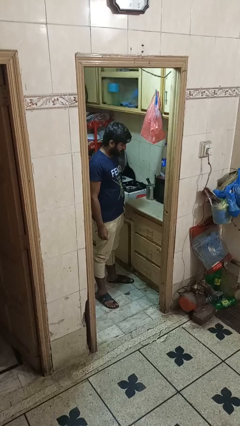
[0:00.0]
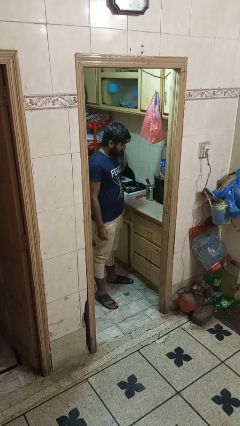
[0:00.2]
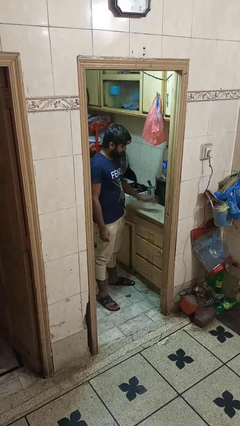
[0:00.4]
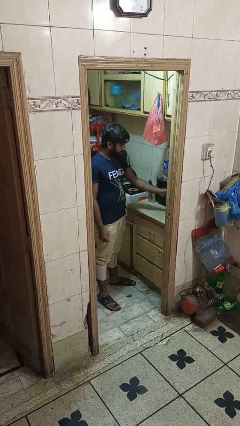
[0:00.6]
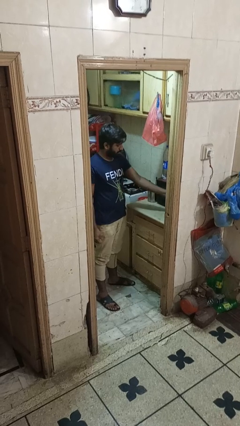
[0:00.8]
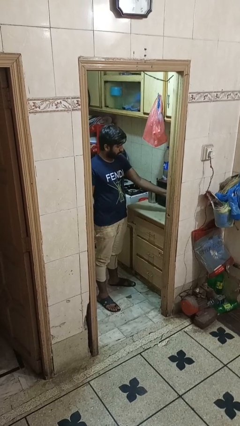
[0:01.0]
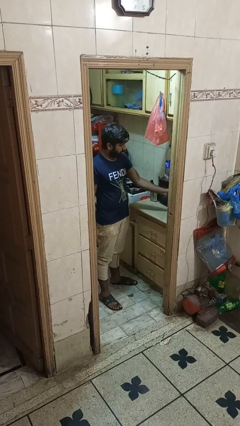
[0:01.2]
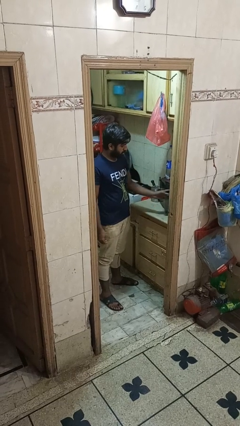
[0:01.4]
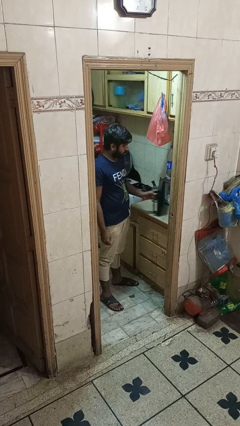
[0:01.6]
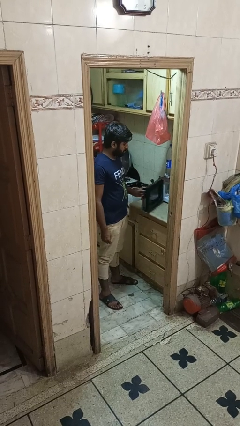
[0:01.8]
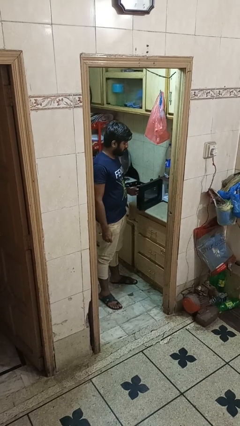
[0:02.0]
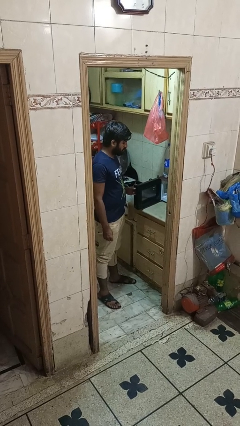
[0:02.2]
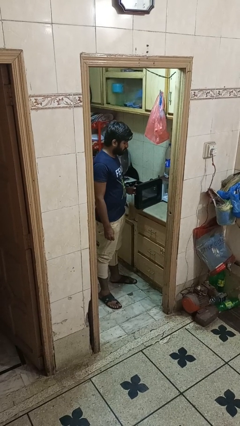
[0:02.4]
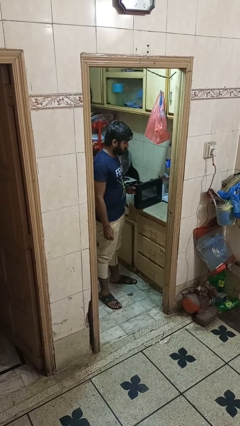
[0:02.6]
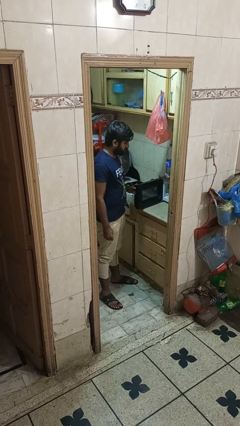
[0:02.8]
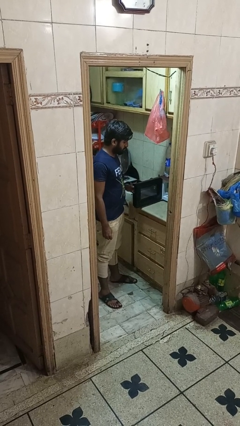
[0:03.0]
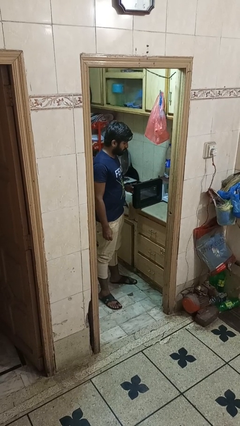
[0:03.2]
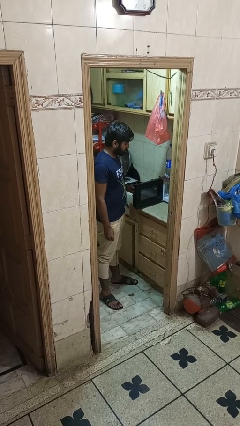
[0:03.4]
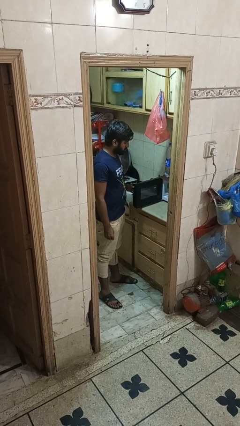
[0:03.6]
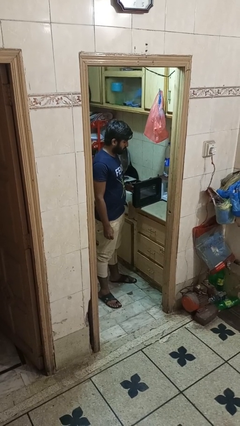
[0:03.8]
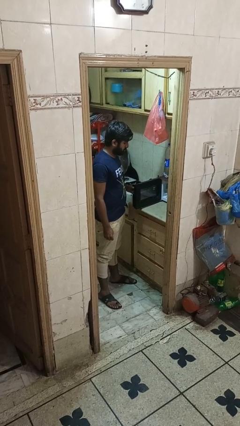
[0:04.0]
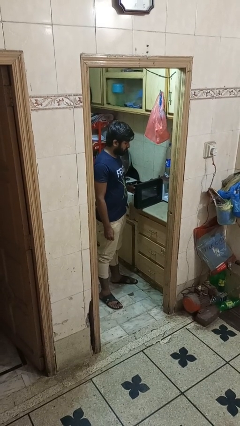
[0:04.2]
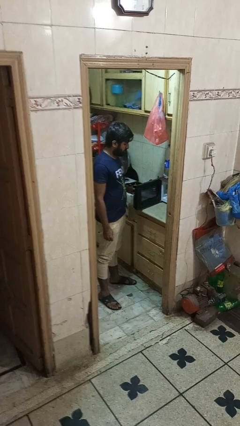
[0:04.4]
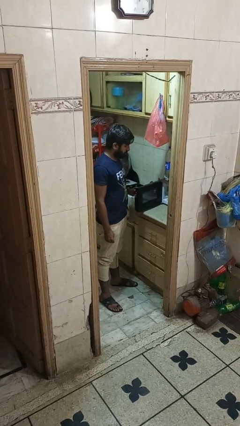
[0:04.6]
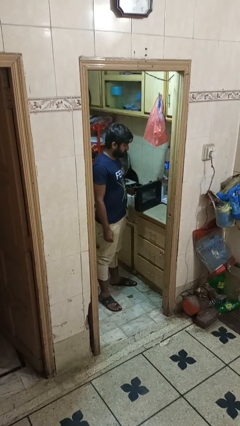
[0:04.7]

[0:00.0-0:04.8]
person opens oven door

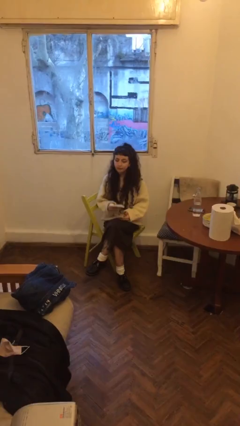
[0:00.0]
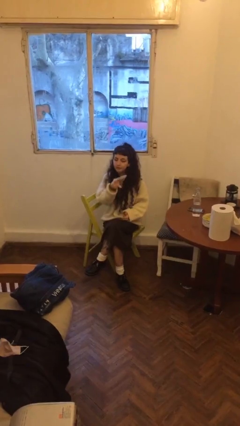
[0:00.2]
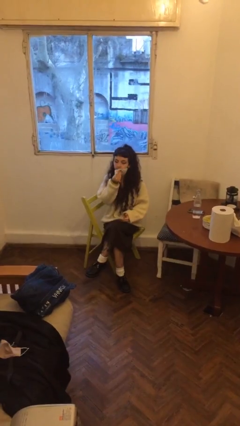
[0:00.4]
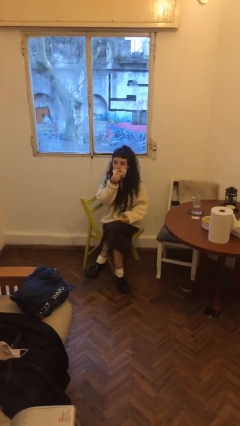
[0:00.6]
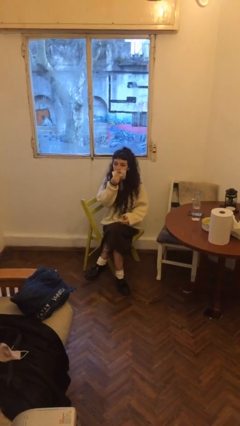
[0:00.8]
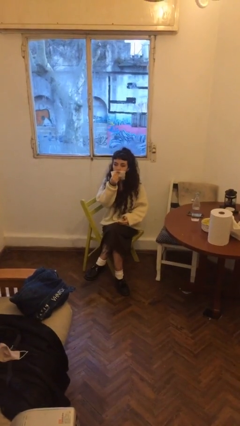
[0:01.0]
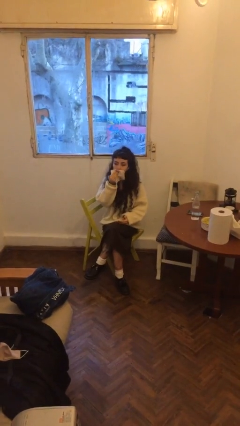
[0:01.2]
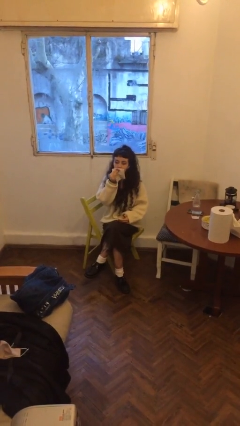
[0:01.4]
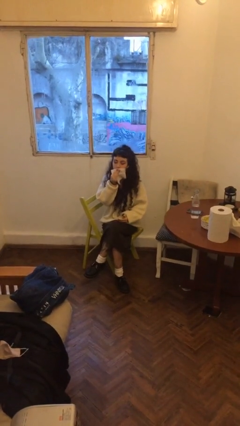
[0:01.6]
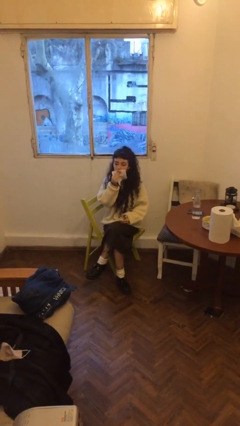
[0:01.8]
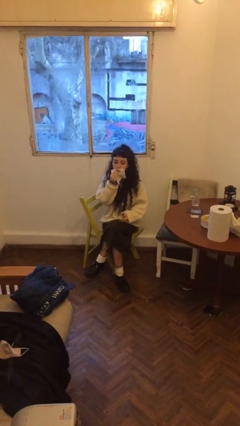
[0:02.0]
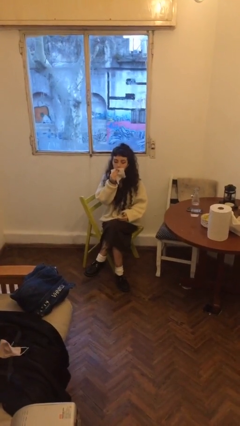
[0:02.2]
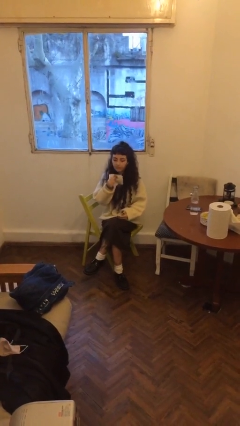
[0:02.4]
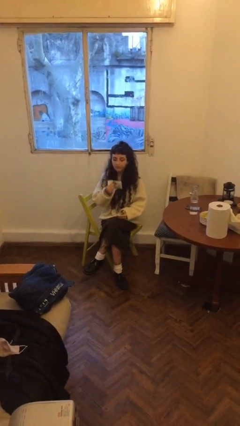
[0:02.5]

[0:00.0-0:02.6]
person wipes mouth with napkin

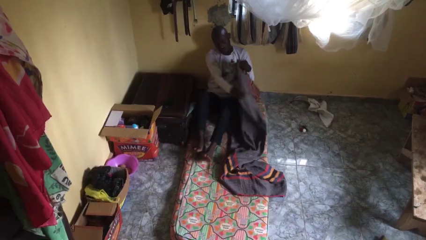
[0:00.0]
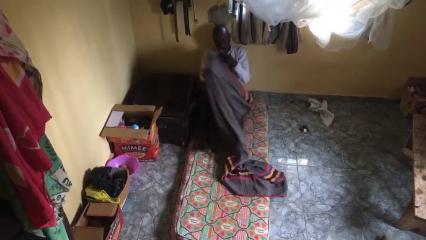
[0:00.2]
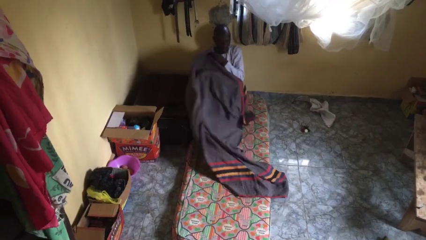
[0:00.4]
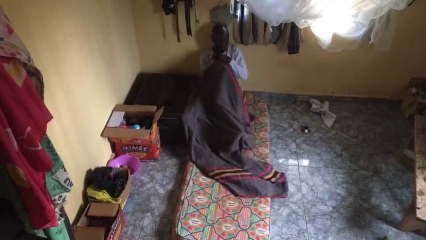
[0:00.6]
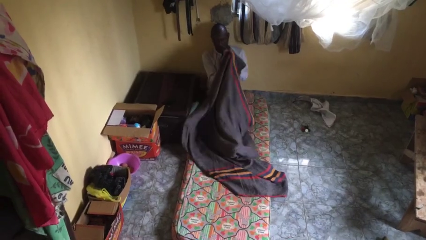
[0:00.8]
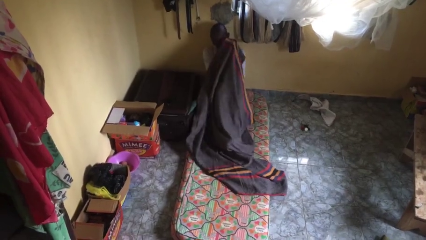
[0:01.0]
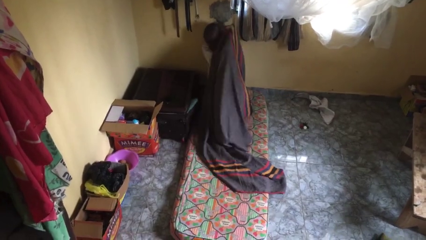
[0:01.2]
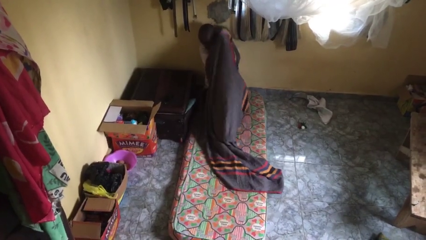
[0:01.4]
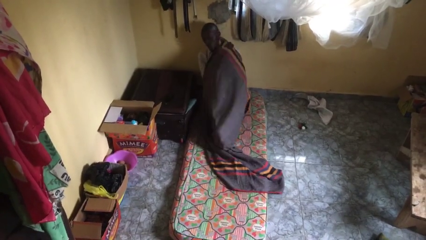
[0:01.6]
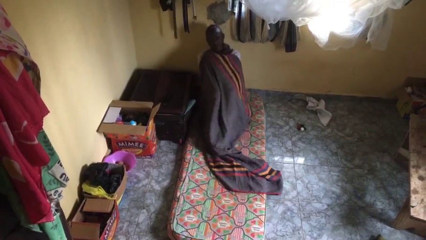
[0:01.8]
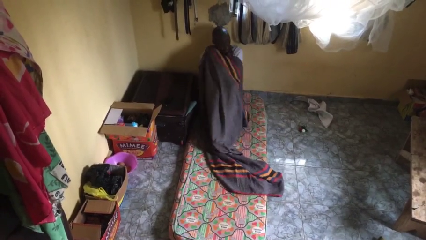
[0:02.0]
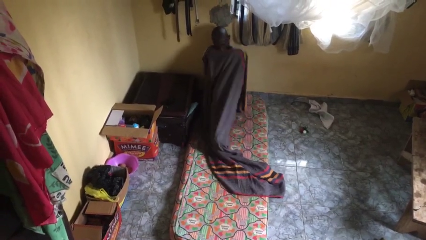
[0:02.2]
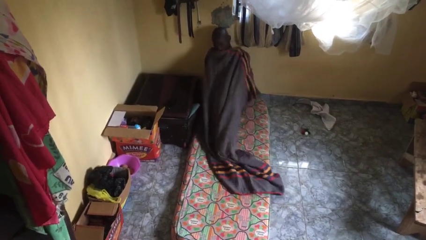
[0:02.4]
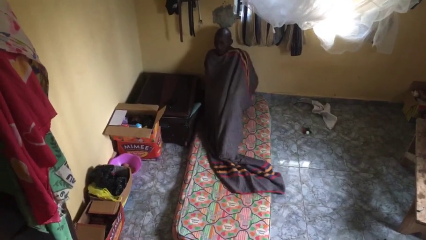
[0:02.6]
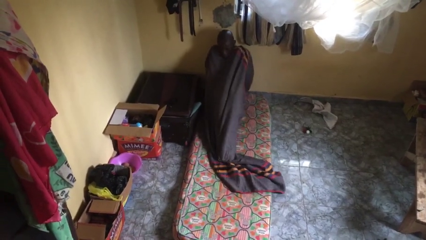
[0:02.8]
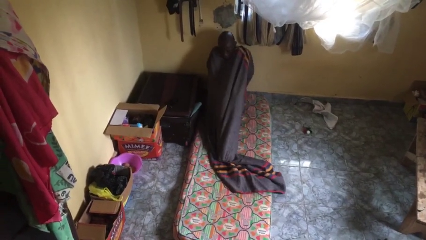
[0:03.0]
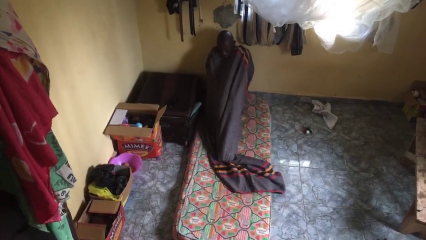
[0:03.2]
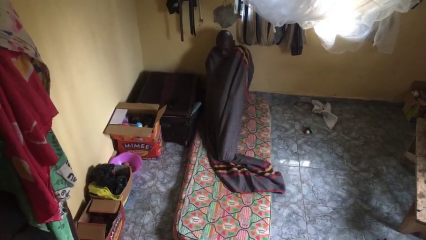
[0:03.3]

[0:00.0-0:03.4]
person covers with blanket

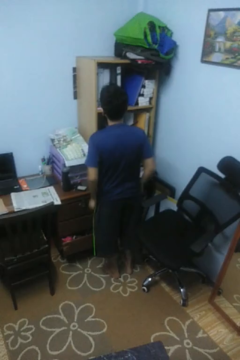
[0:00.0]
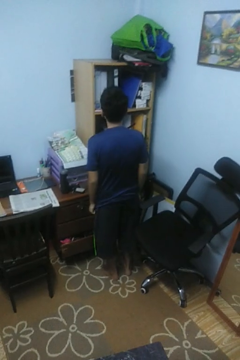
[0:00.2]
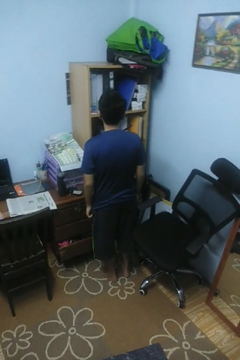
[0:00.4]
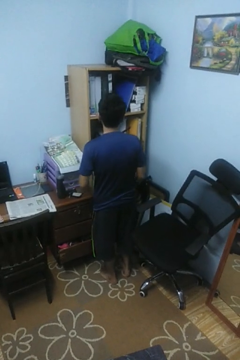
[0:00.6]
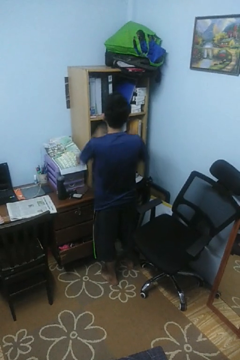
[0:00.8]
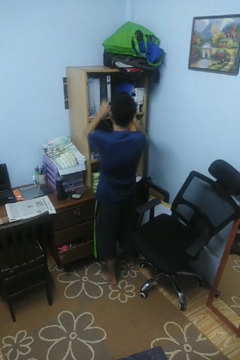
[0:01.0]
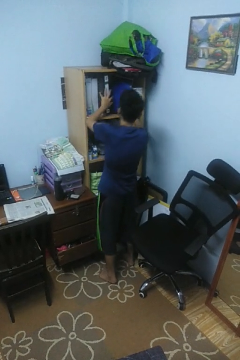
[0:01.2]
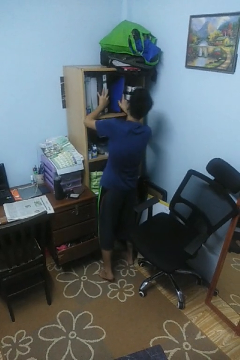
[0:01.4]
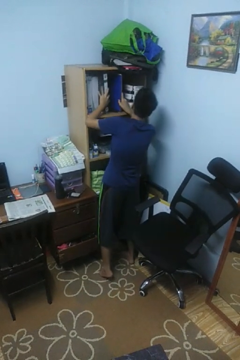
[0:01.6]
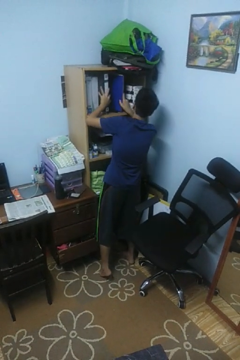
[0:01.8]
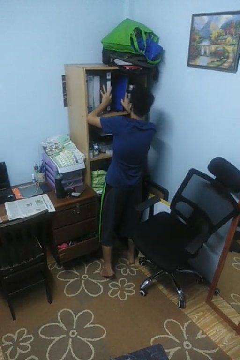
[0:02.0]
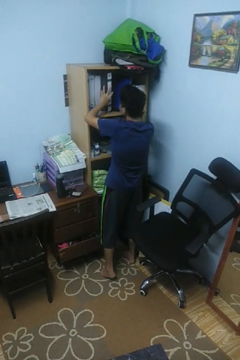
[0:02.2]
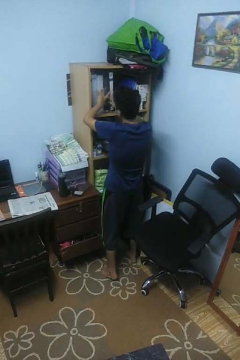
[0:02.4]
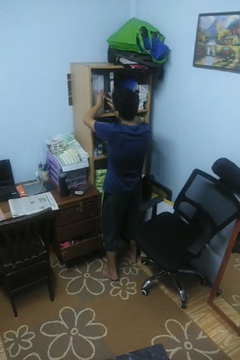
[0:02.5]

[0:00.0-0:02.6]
person searches in cabinet

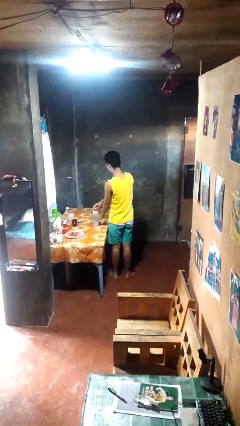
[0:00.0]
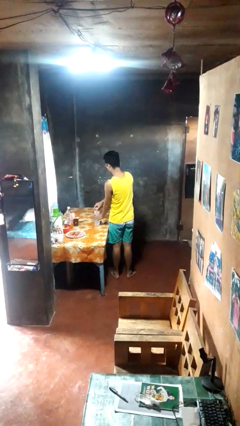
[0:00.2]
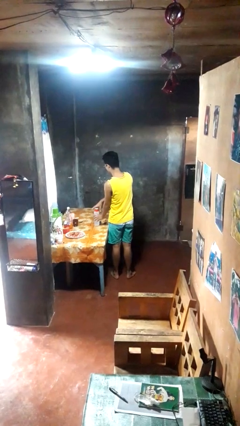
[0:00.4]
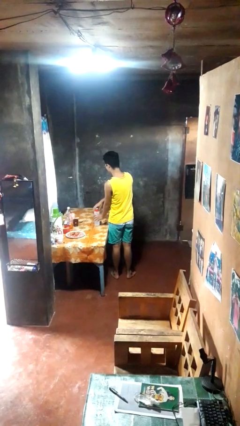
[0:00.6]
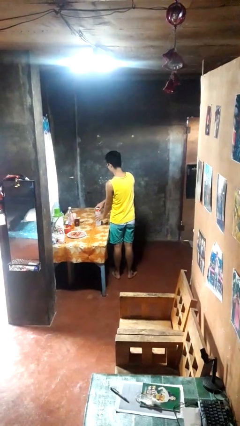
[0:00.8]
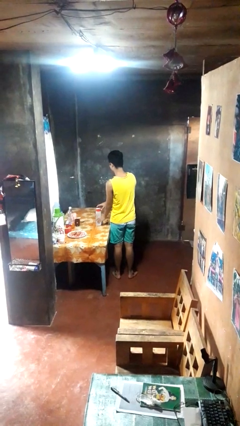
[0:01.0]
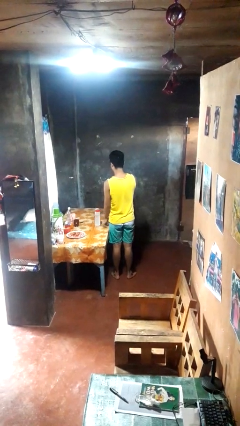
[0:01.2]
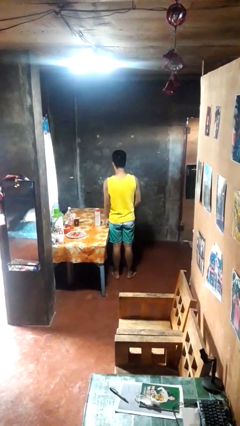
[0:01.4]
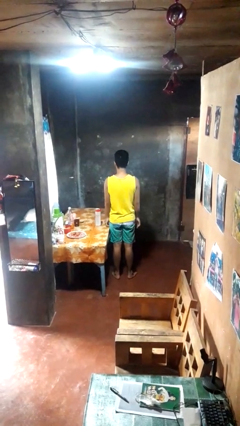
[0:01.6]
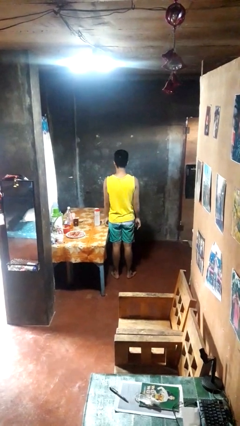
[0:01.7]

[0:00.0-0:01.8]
person closes jar

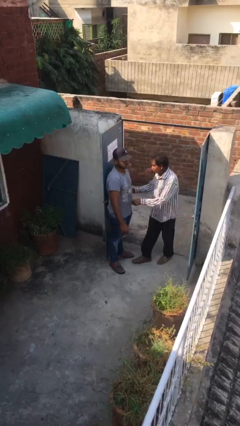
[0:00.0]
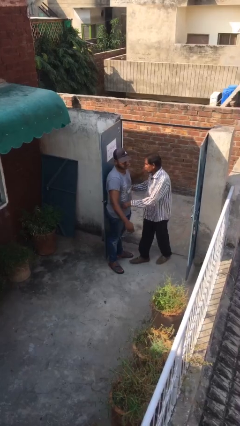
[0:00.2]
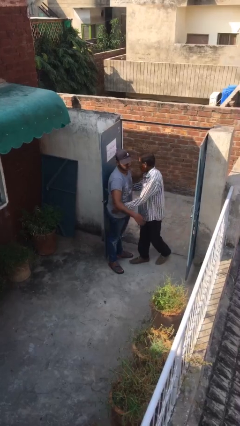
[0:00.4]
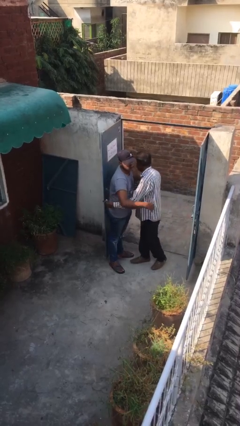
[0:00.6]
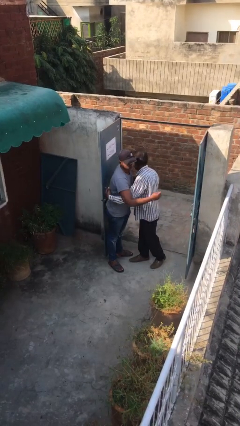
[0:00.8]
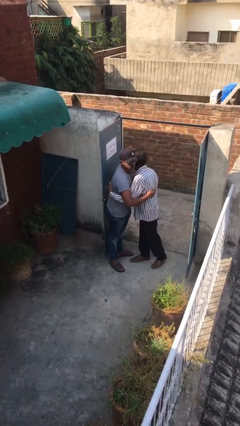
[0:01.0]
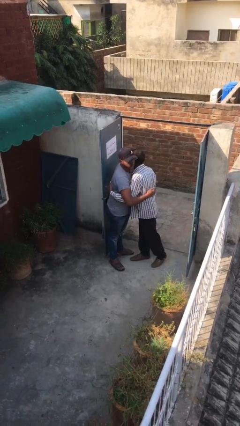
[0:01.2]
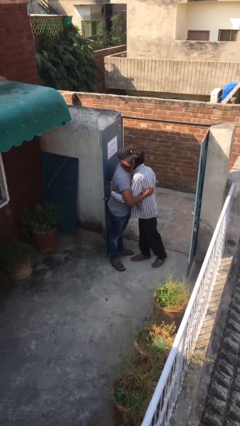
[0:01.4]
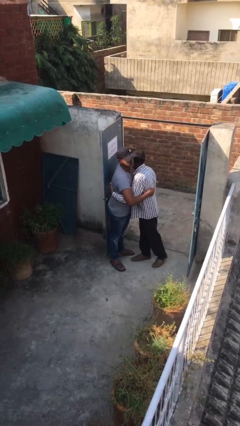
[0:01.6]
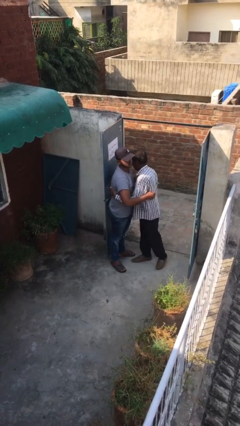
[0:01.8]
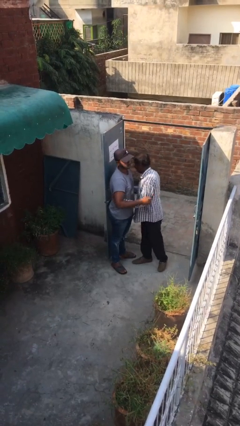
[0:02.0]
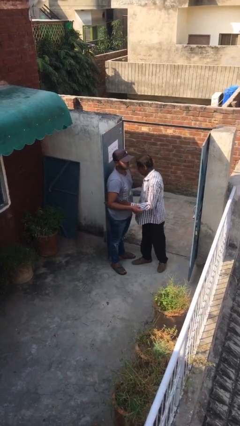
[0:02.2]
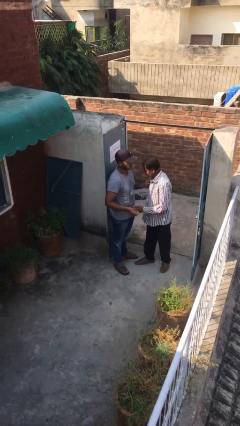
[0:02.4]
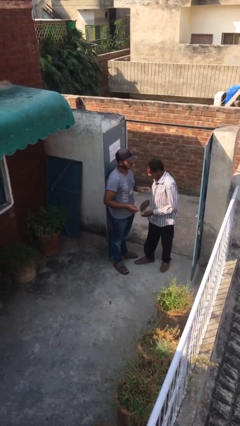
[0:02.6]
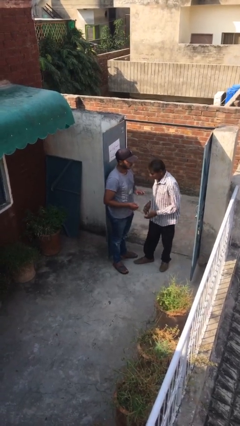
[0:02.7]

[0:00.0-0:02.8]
person embraces person
